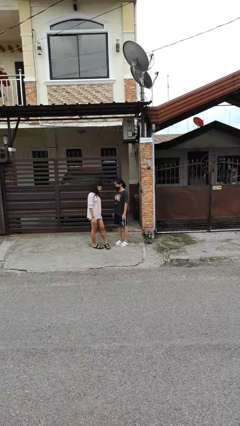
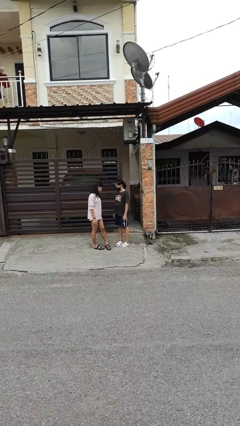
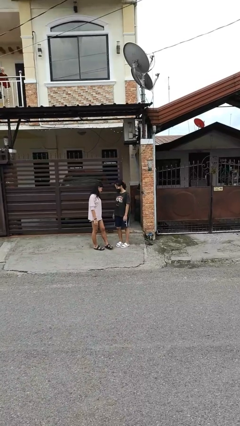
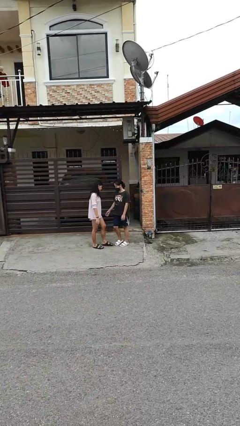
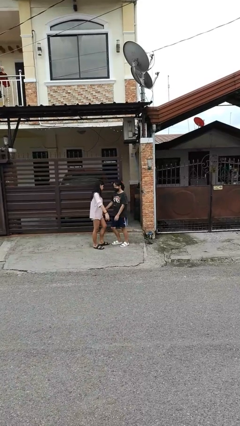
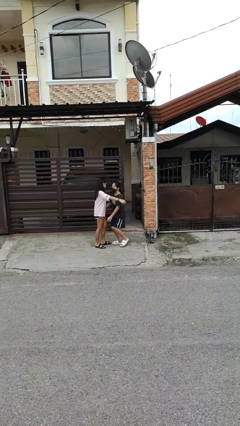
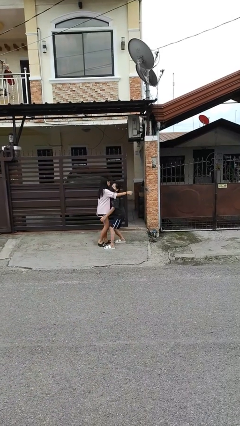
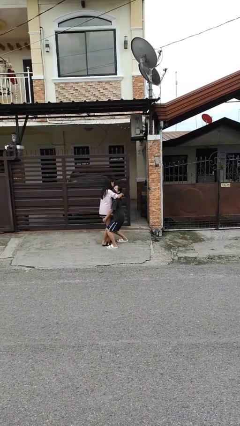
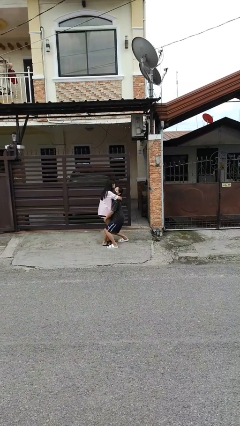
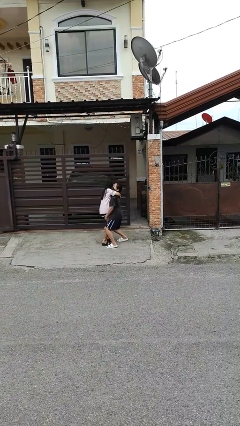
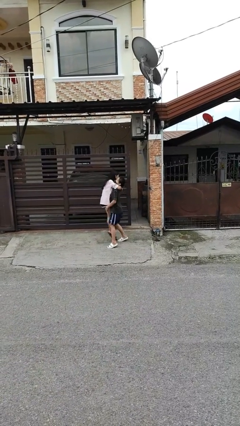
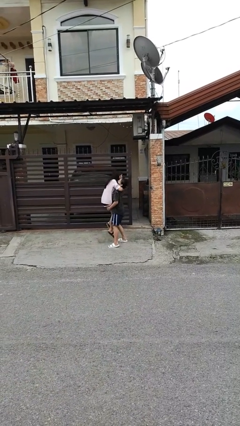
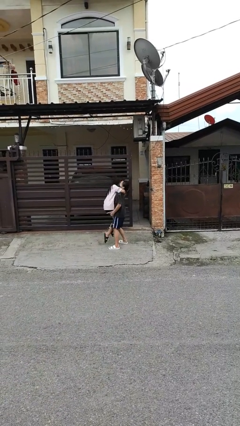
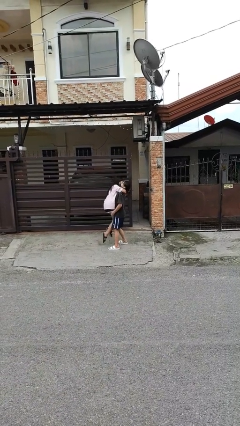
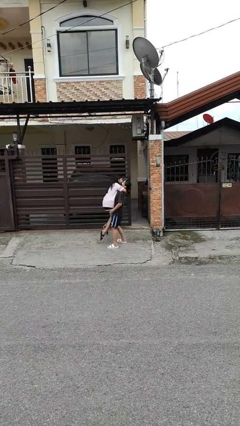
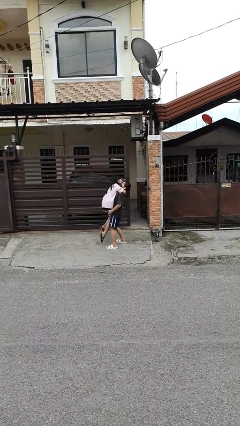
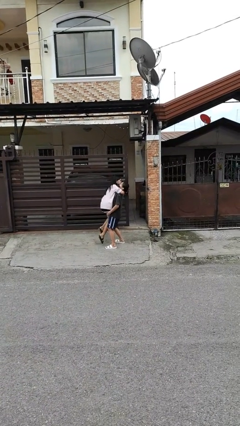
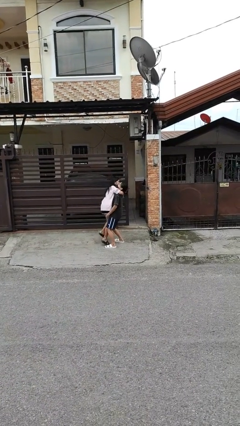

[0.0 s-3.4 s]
person picks up person

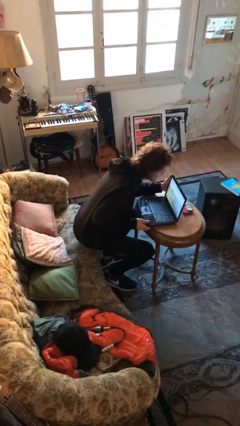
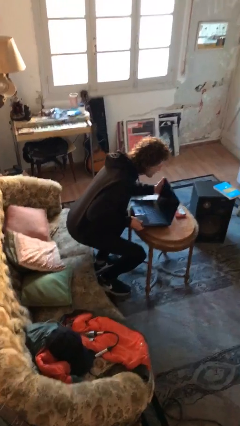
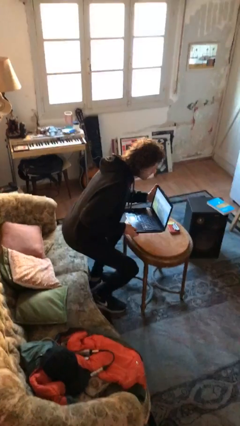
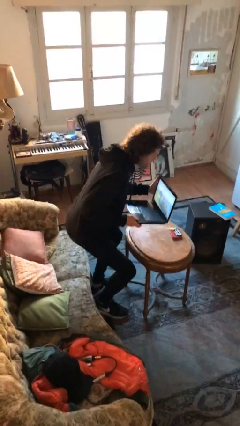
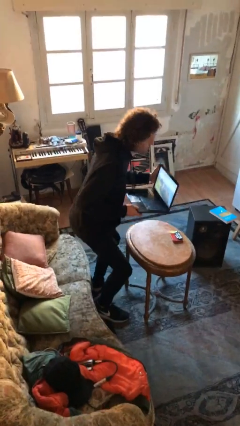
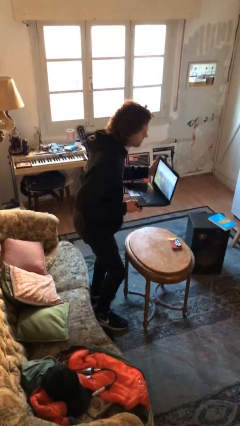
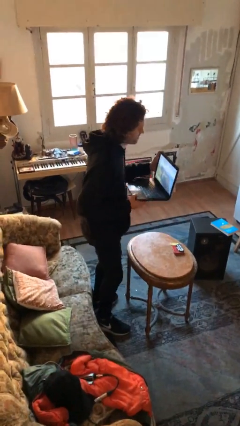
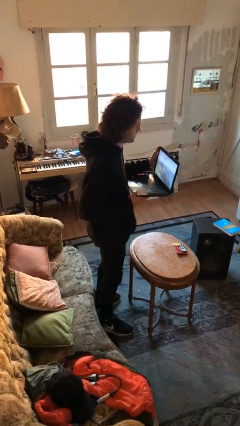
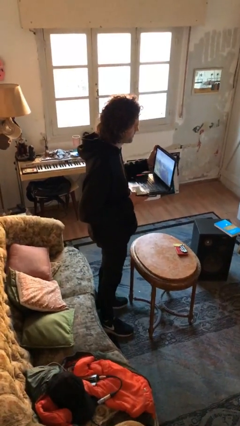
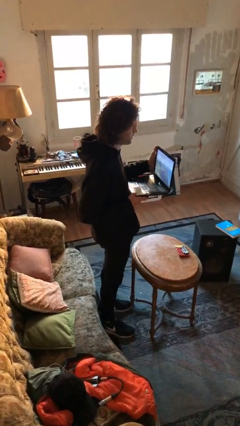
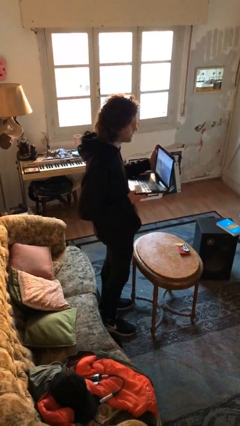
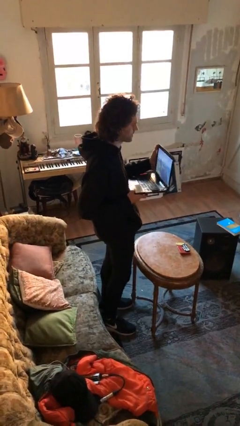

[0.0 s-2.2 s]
person stands up

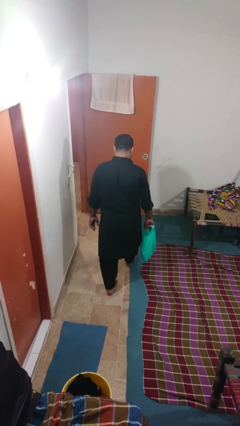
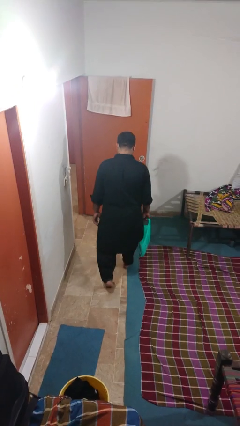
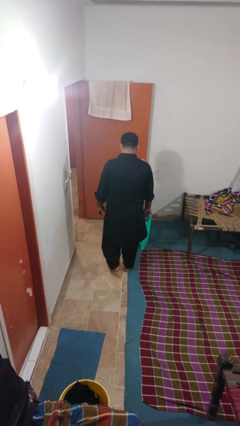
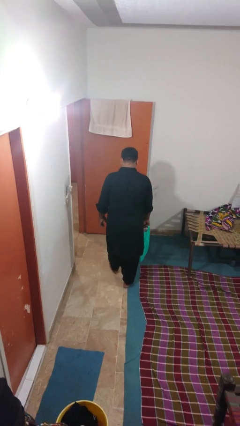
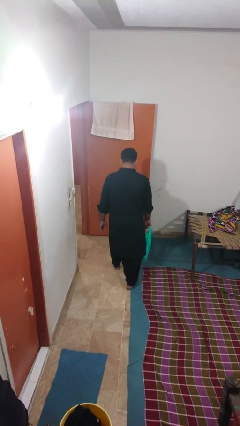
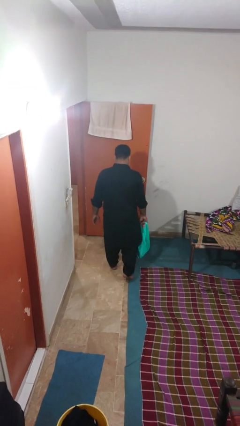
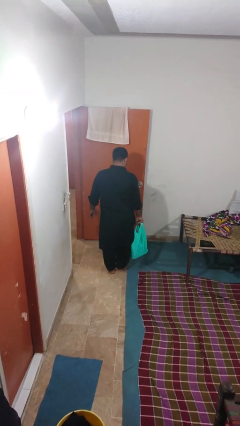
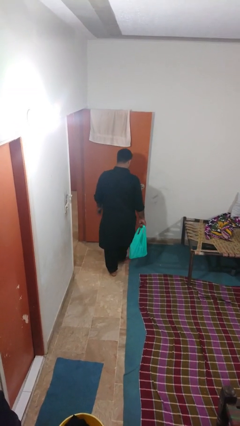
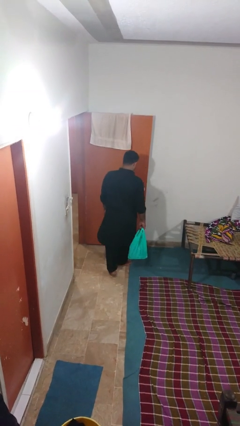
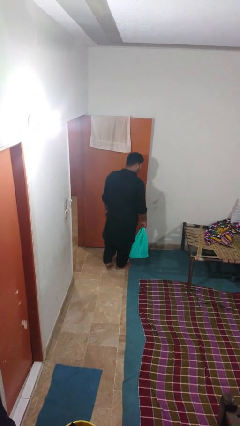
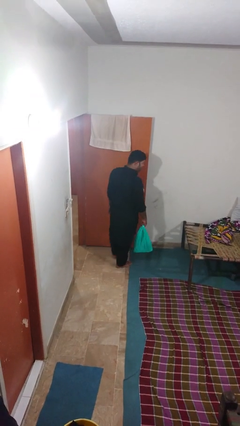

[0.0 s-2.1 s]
person carries groceries

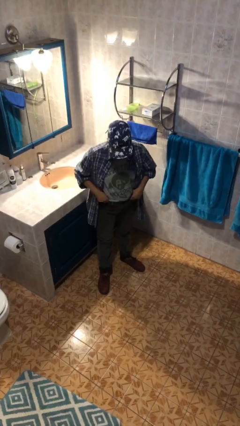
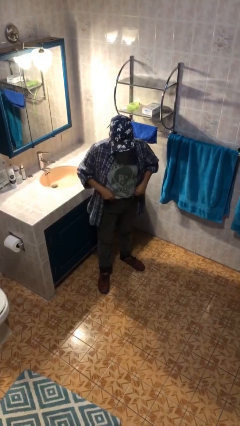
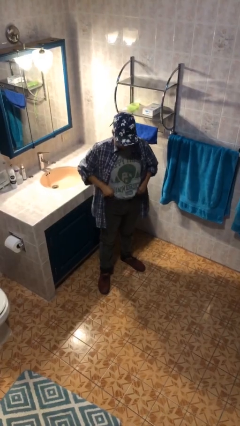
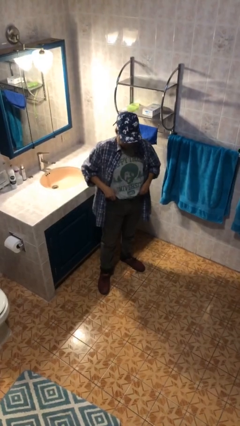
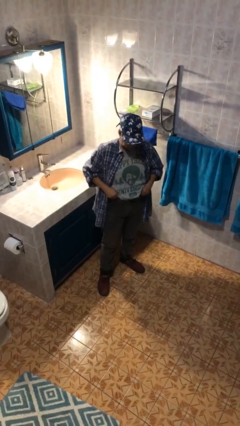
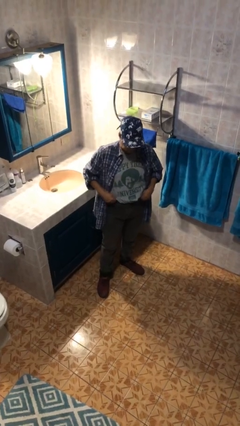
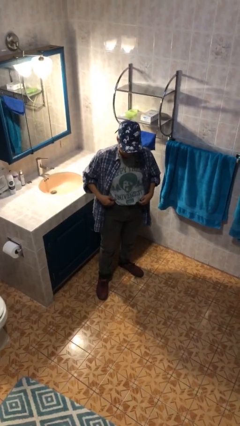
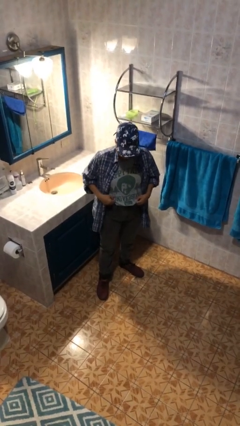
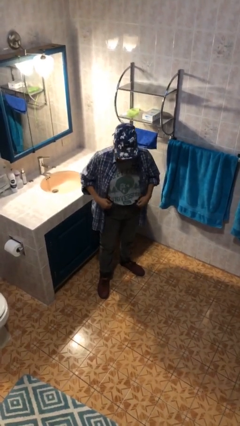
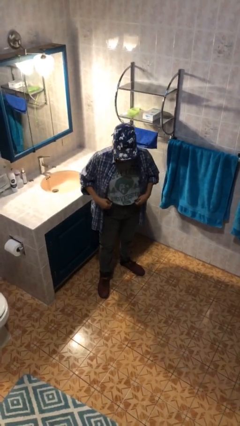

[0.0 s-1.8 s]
person hikes up pants

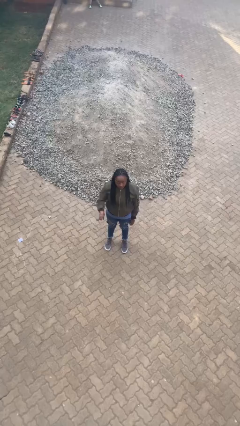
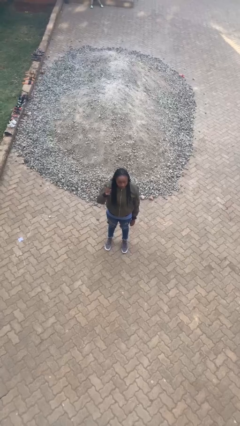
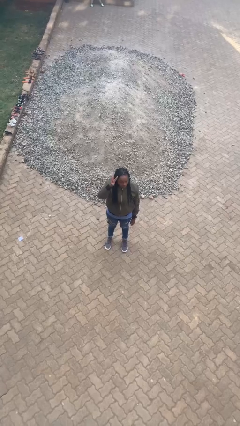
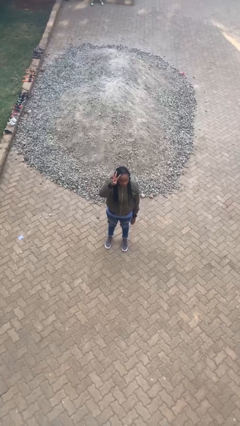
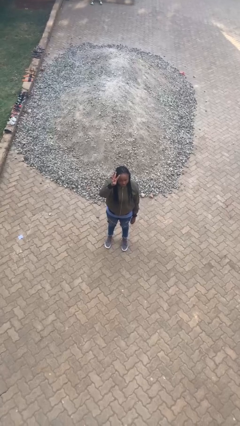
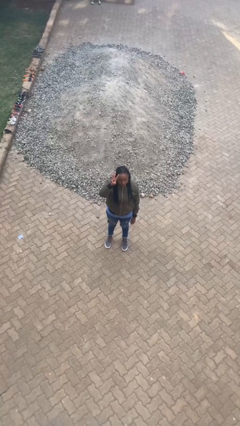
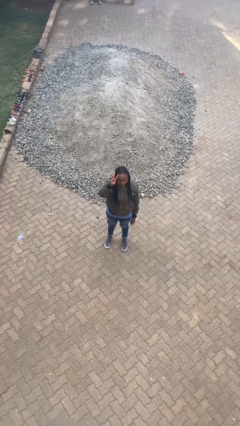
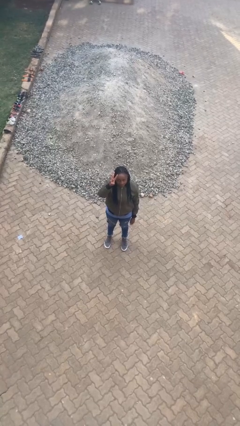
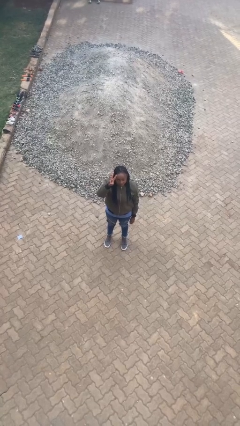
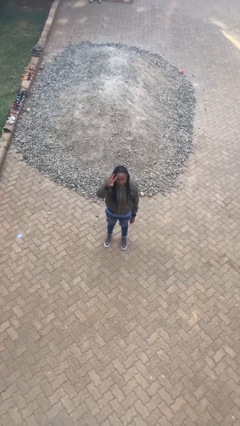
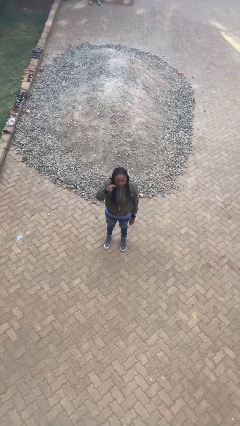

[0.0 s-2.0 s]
person gestures number three

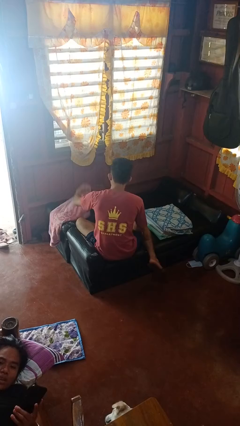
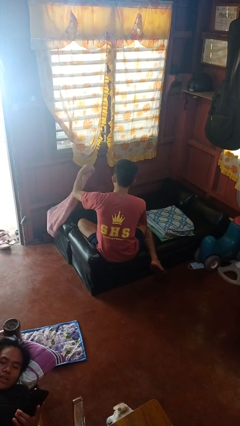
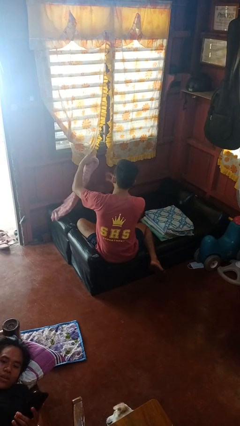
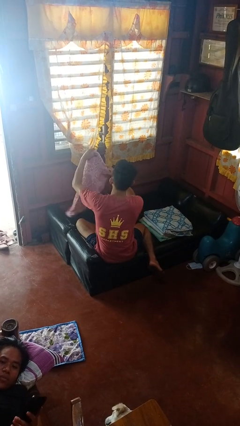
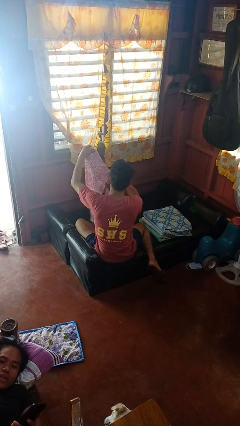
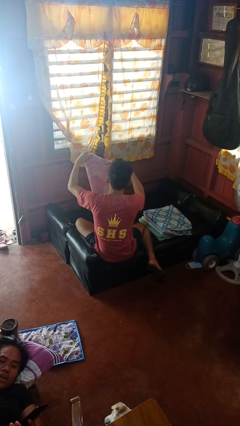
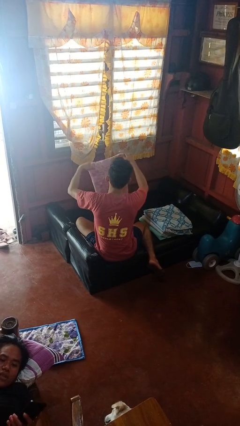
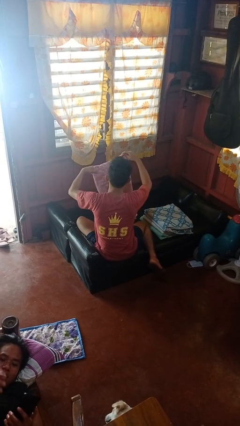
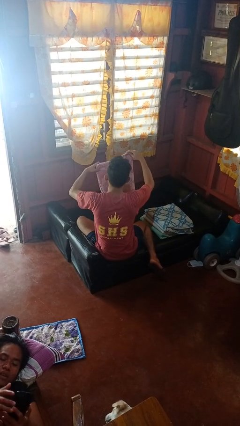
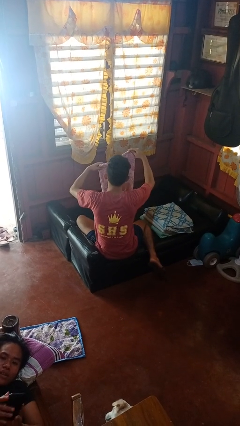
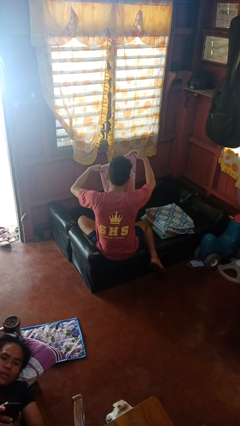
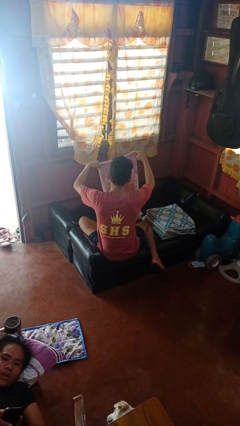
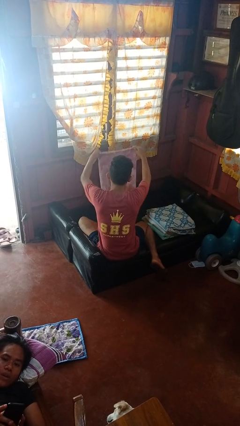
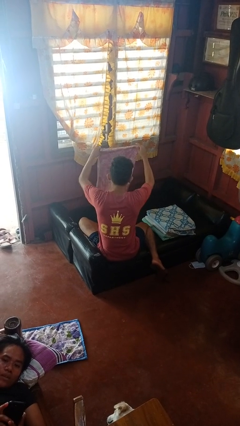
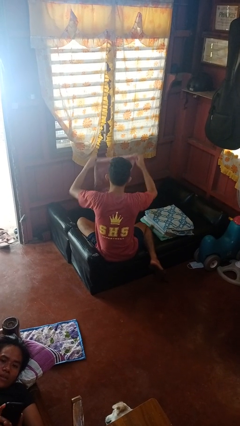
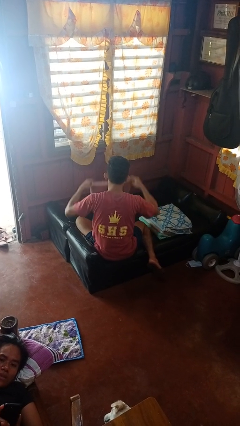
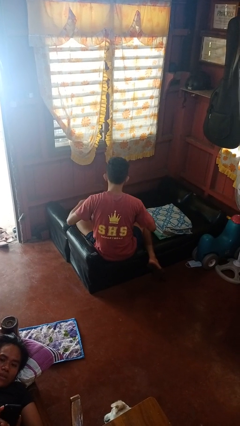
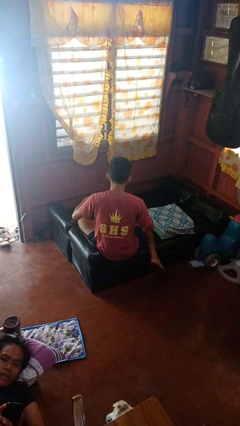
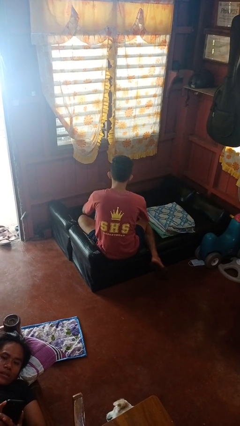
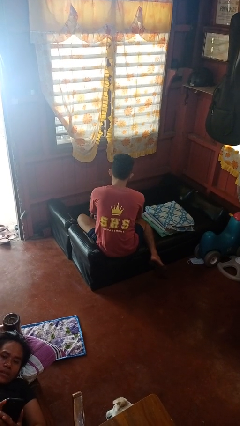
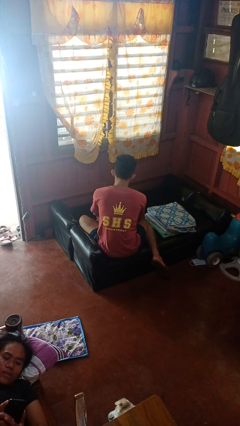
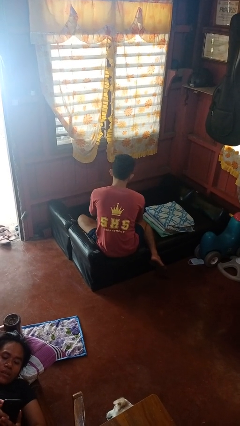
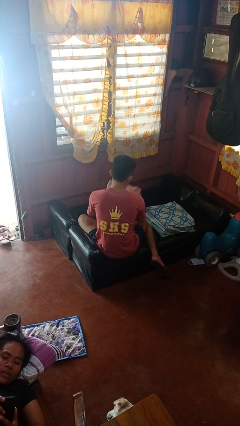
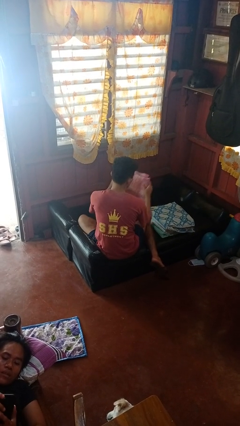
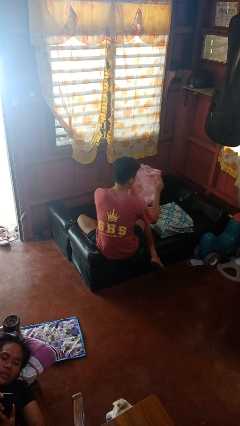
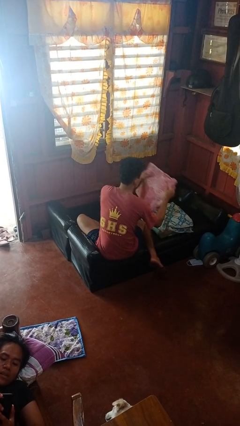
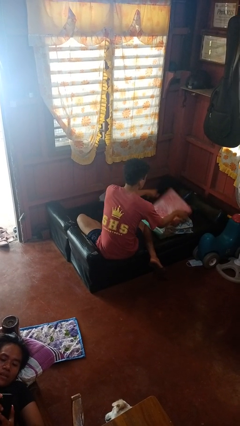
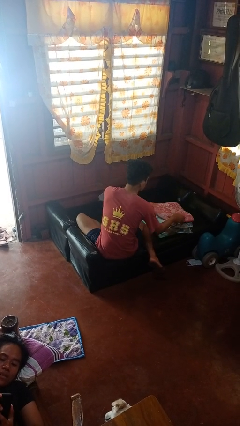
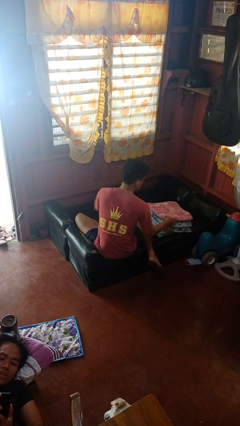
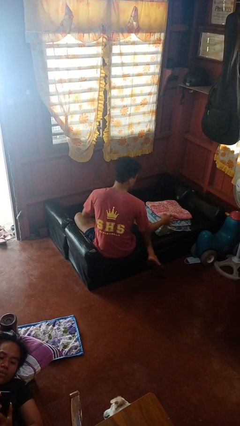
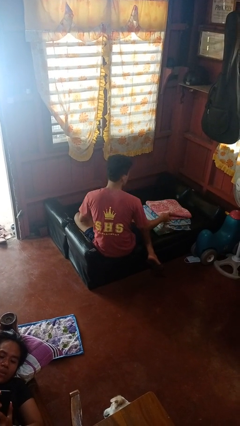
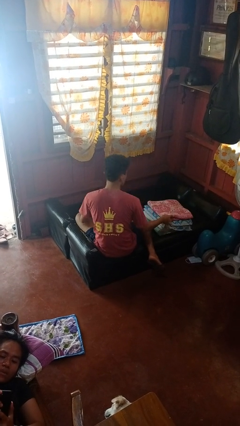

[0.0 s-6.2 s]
person folds towel
